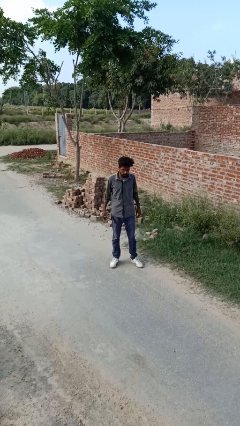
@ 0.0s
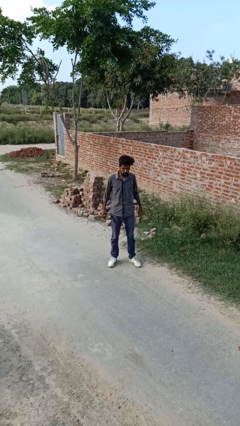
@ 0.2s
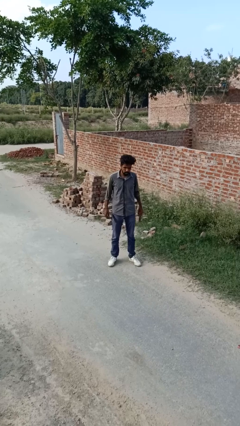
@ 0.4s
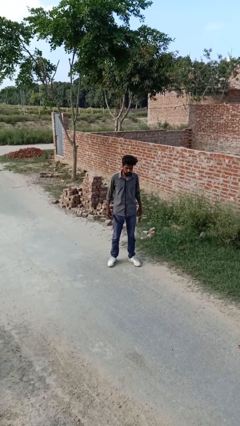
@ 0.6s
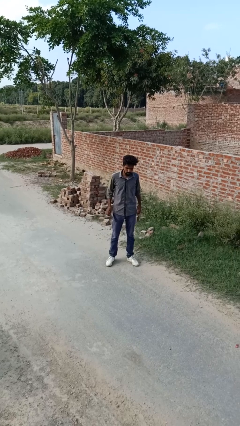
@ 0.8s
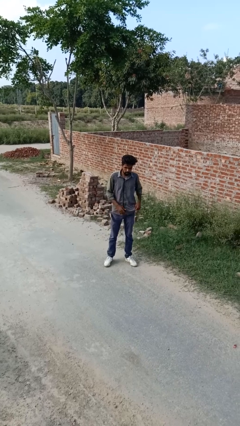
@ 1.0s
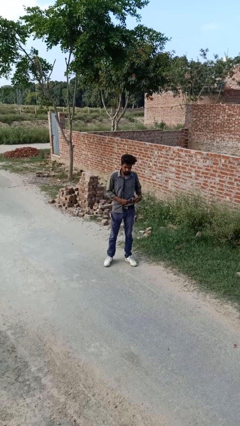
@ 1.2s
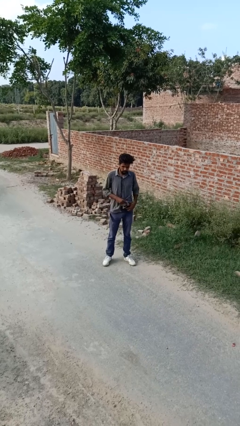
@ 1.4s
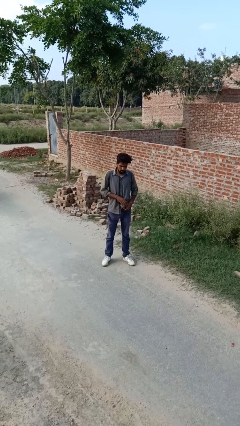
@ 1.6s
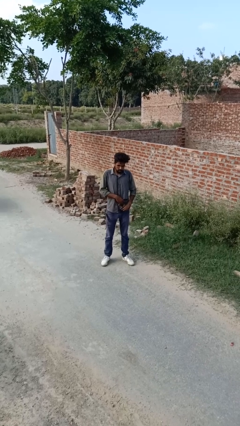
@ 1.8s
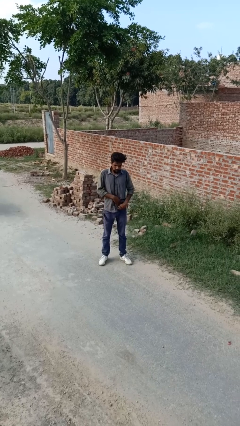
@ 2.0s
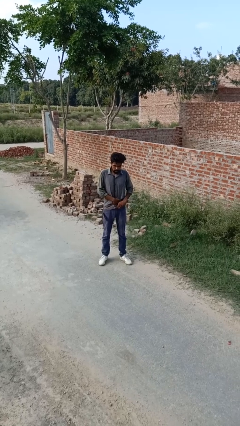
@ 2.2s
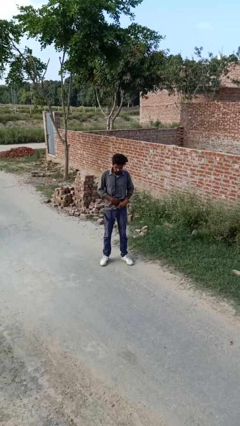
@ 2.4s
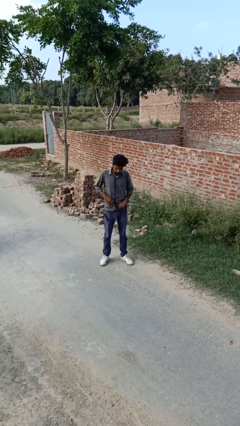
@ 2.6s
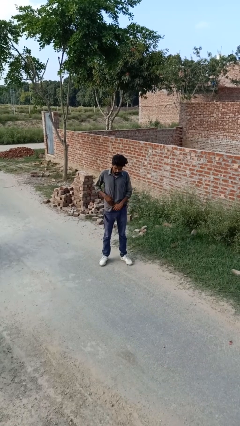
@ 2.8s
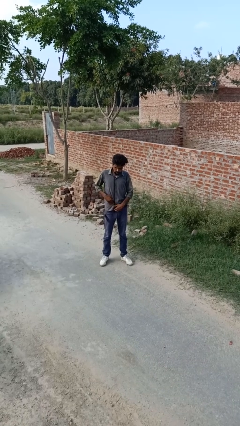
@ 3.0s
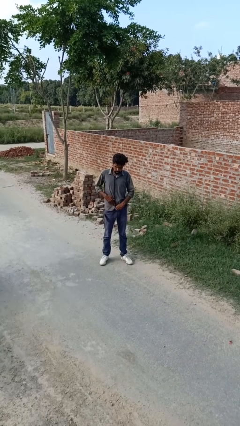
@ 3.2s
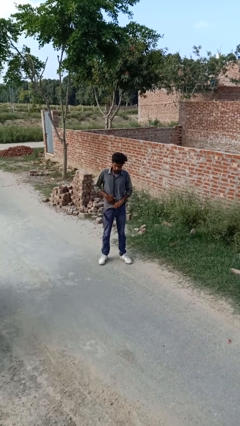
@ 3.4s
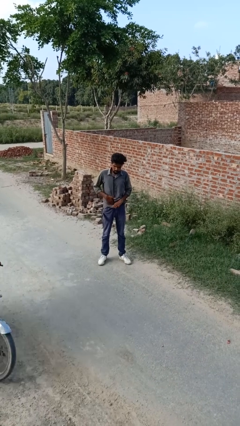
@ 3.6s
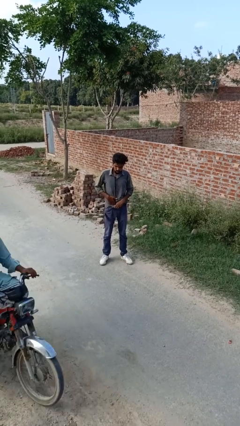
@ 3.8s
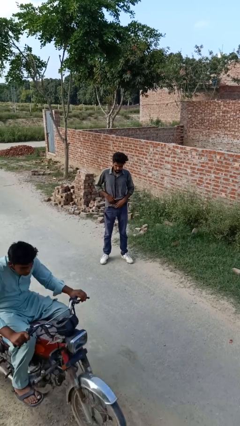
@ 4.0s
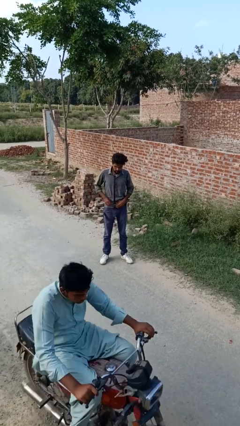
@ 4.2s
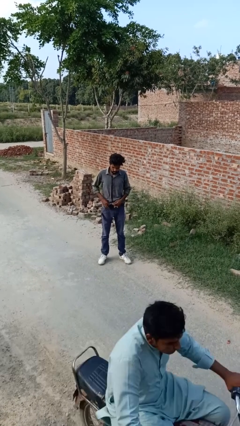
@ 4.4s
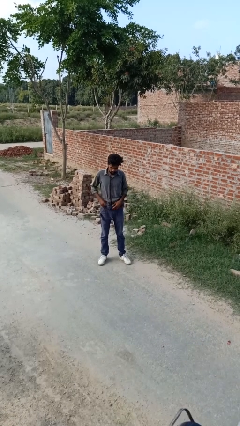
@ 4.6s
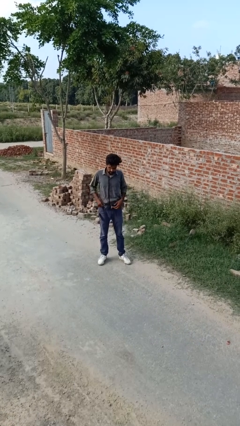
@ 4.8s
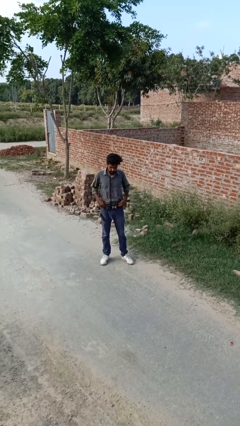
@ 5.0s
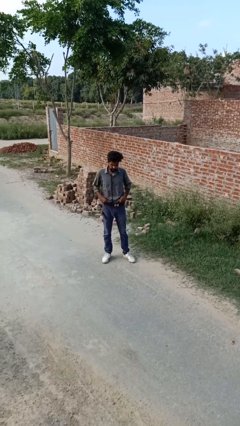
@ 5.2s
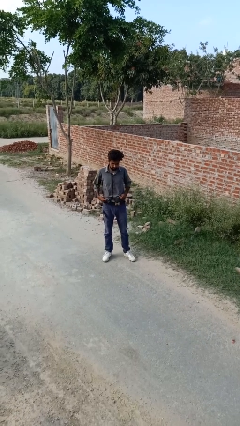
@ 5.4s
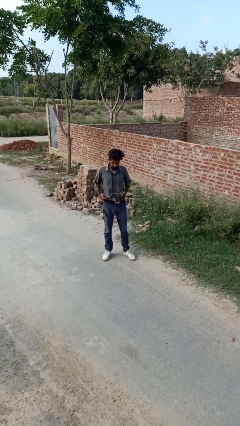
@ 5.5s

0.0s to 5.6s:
person tucks in shirt

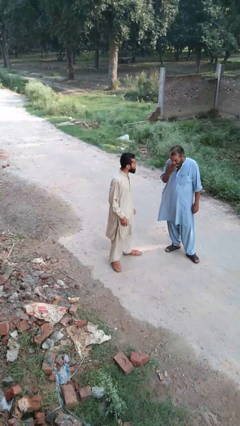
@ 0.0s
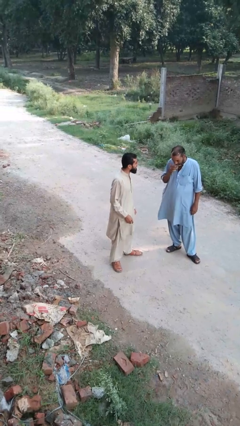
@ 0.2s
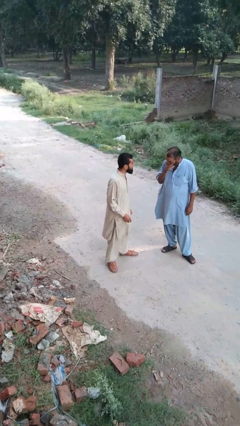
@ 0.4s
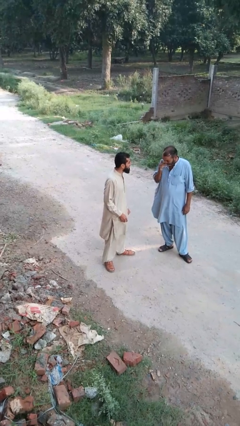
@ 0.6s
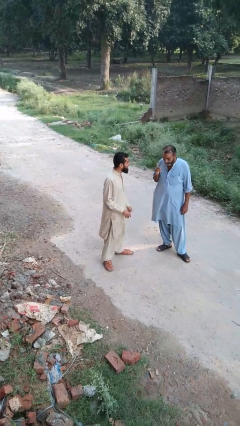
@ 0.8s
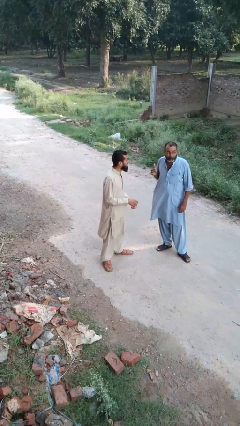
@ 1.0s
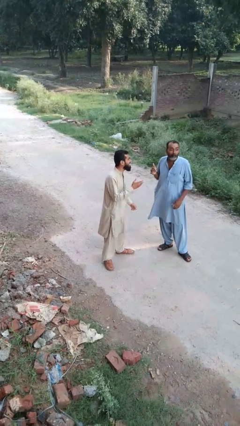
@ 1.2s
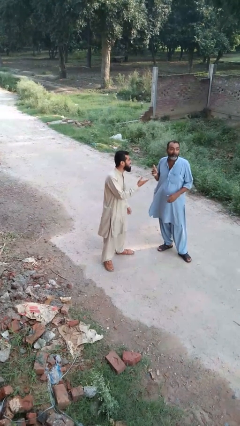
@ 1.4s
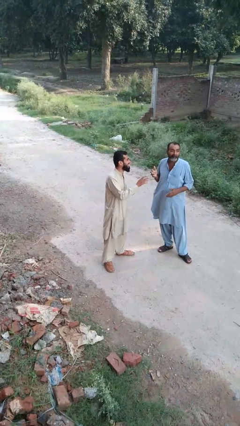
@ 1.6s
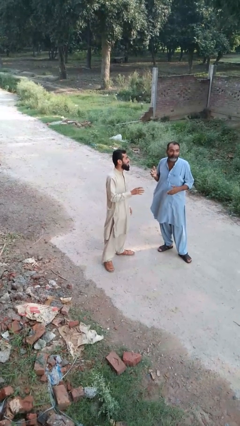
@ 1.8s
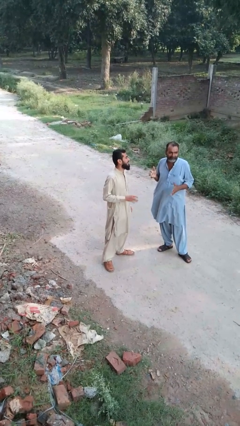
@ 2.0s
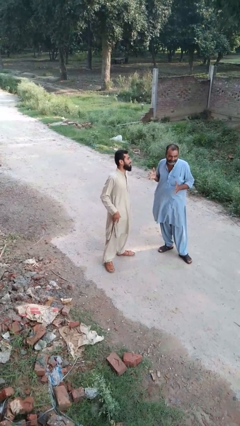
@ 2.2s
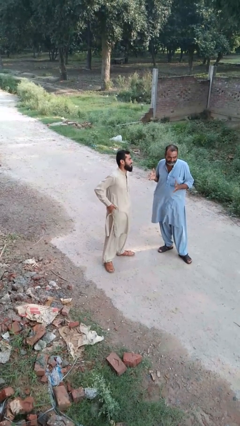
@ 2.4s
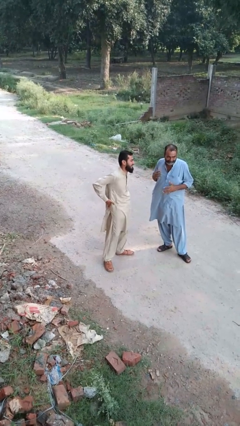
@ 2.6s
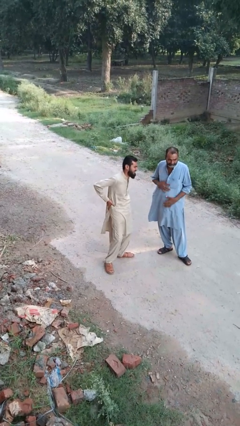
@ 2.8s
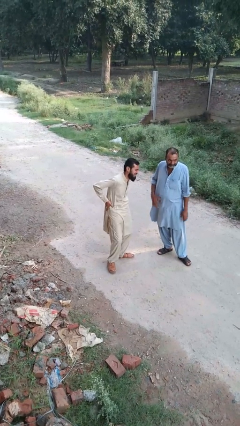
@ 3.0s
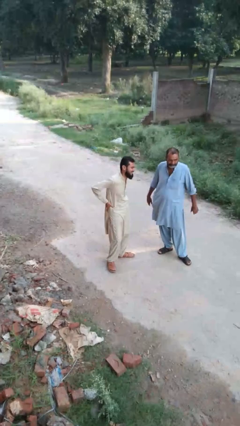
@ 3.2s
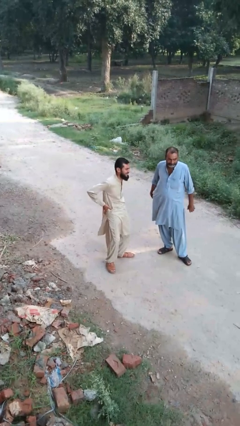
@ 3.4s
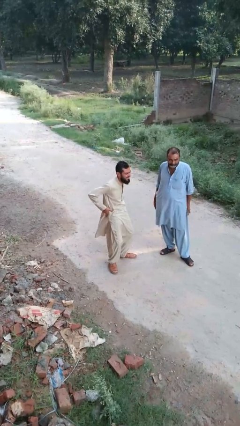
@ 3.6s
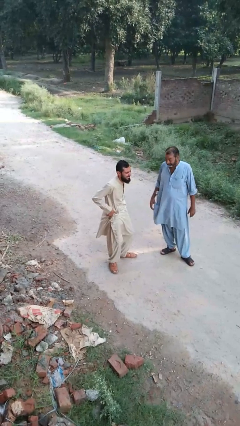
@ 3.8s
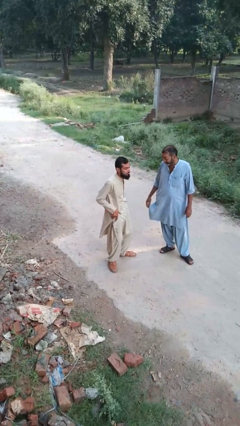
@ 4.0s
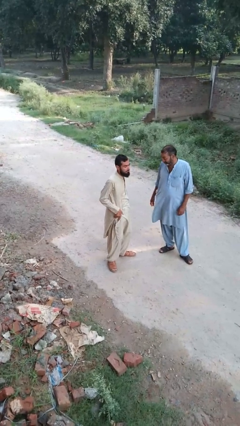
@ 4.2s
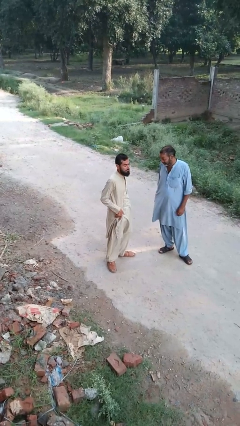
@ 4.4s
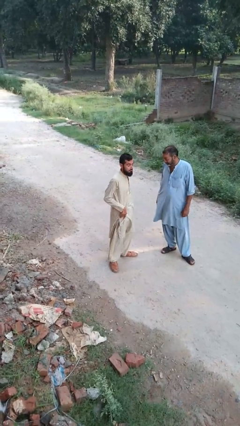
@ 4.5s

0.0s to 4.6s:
person laughs with person

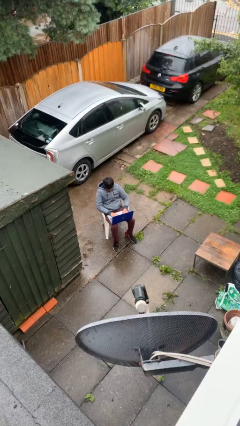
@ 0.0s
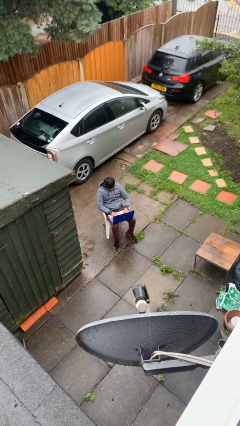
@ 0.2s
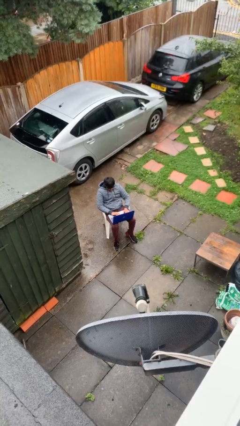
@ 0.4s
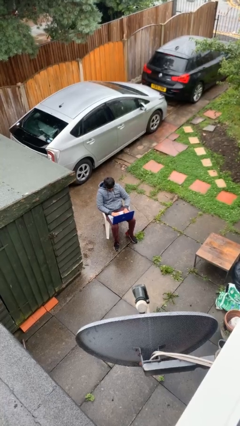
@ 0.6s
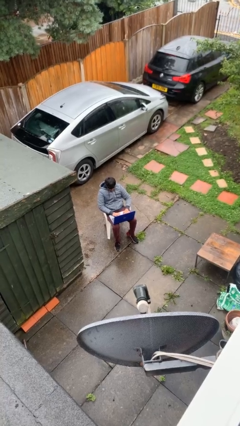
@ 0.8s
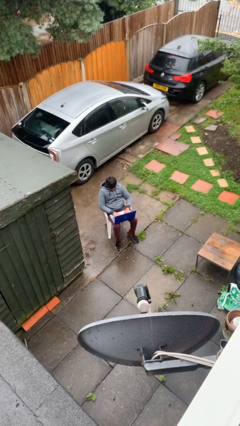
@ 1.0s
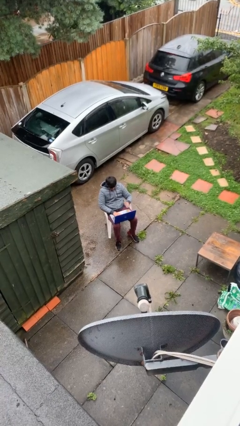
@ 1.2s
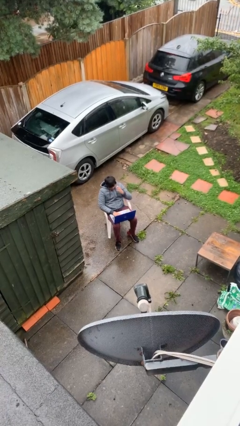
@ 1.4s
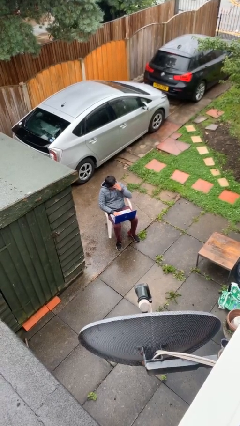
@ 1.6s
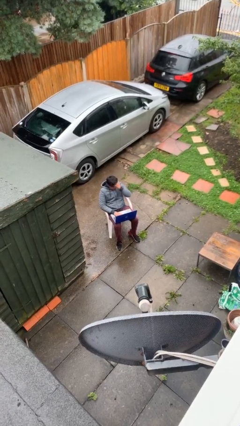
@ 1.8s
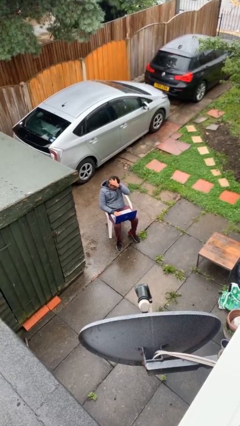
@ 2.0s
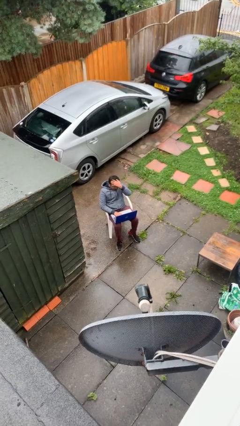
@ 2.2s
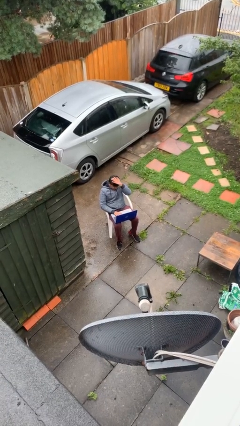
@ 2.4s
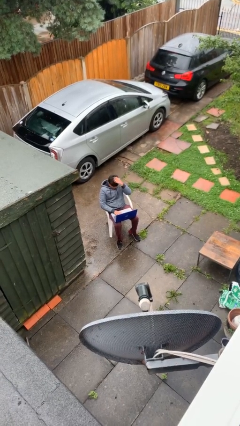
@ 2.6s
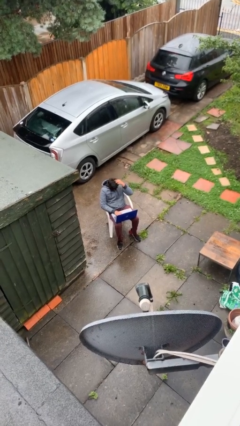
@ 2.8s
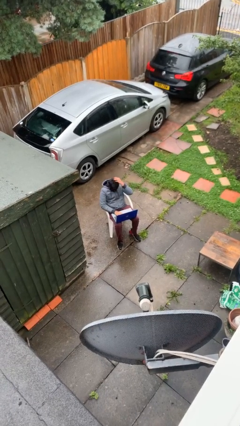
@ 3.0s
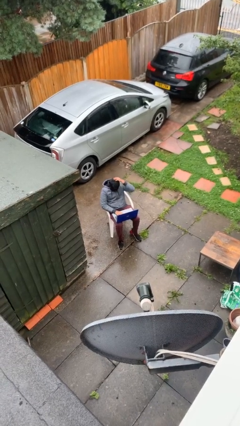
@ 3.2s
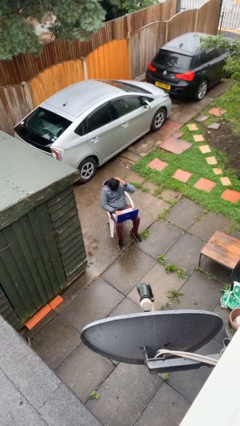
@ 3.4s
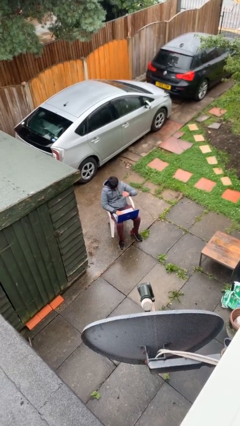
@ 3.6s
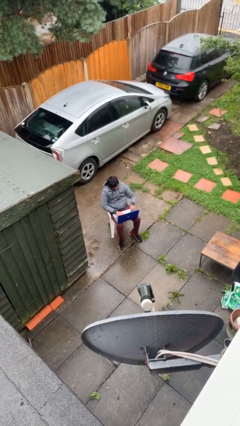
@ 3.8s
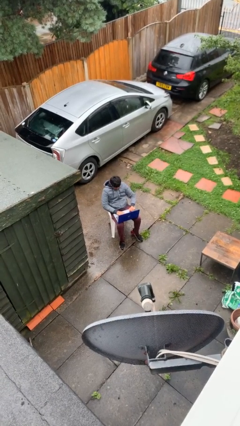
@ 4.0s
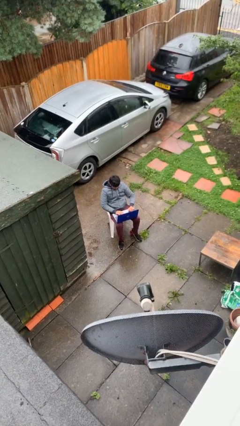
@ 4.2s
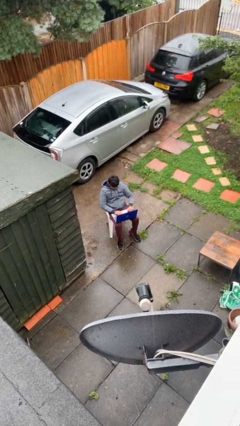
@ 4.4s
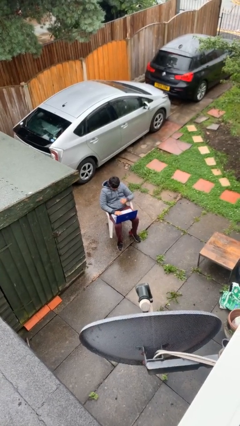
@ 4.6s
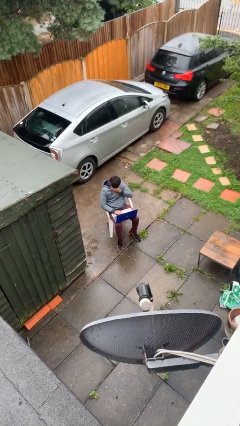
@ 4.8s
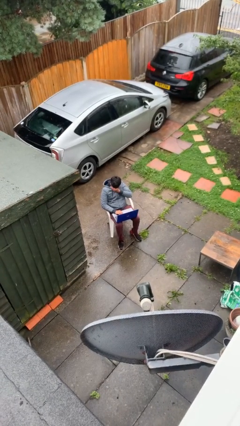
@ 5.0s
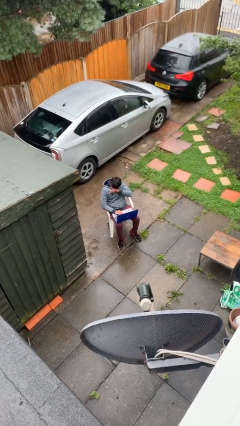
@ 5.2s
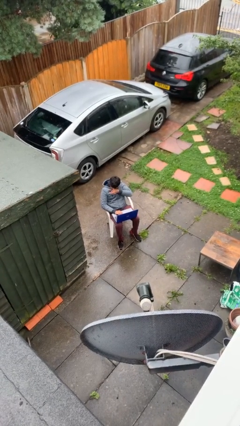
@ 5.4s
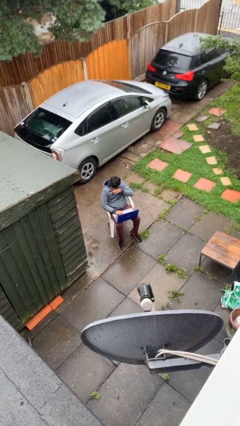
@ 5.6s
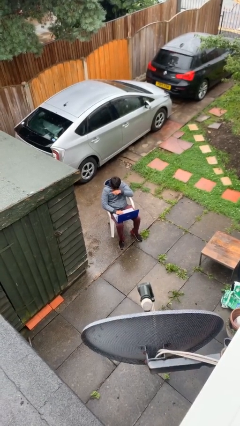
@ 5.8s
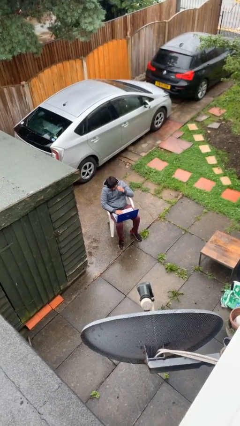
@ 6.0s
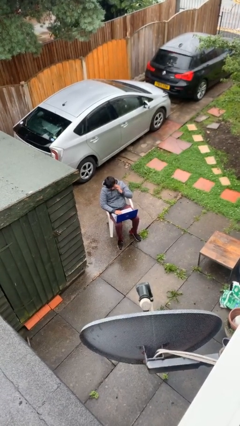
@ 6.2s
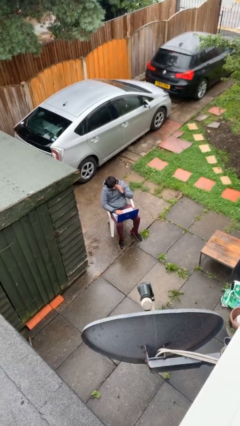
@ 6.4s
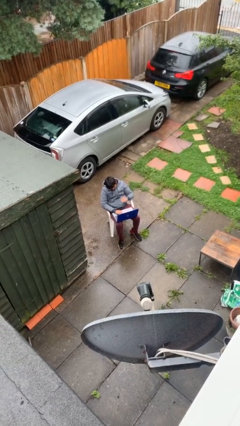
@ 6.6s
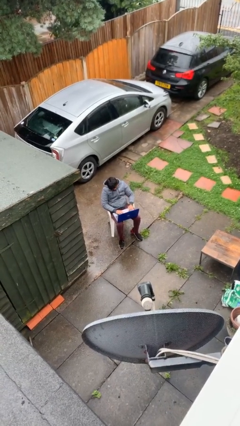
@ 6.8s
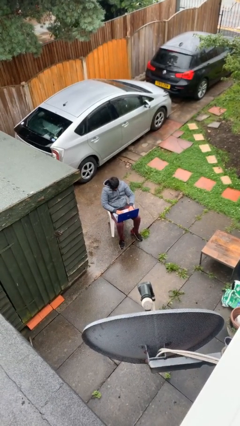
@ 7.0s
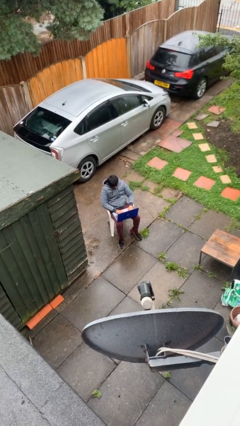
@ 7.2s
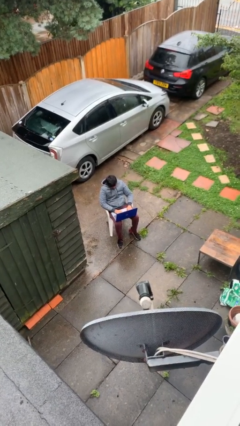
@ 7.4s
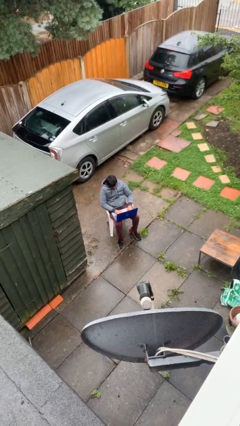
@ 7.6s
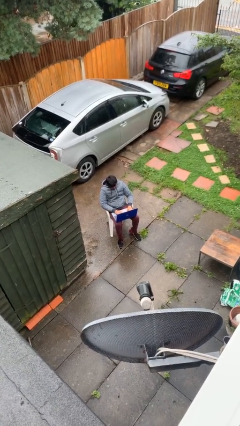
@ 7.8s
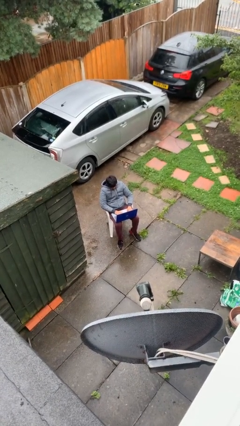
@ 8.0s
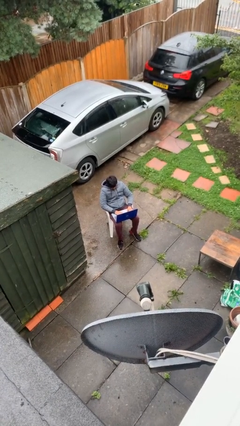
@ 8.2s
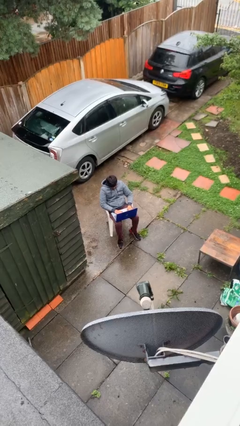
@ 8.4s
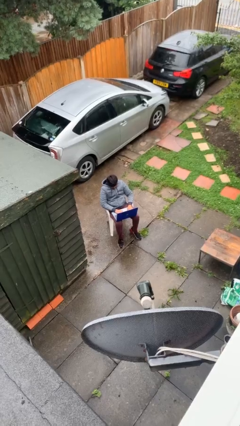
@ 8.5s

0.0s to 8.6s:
person interacts with laptop
